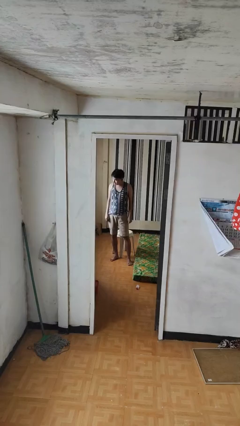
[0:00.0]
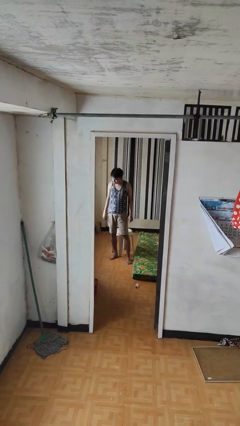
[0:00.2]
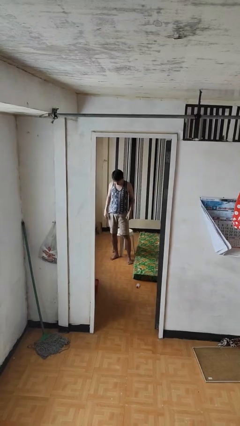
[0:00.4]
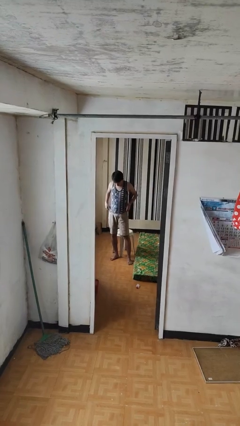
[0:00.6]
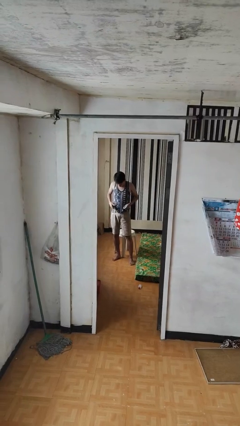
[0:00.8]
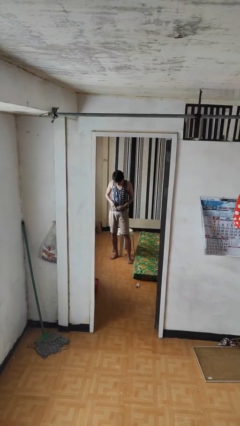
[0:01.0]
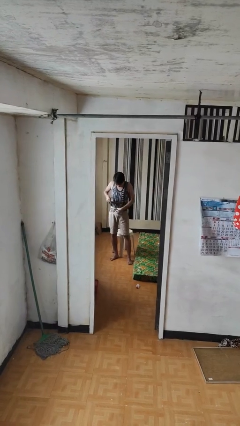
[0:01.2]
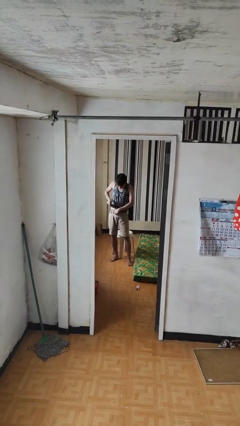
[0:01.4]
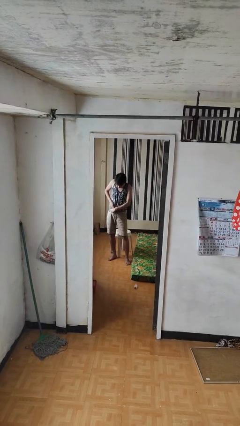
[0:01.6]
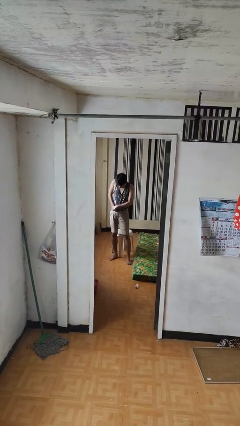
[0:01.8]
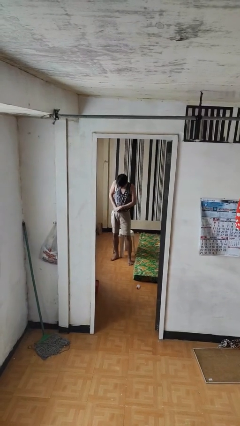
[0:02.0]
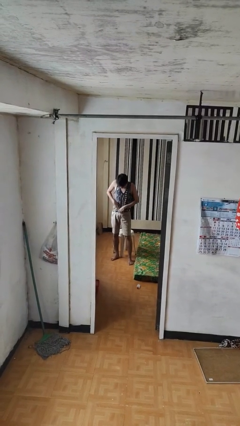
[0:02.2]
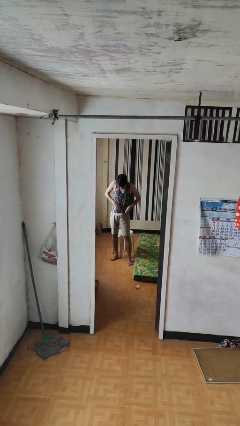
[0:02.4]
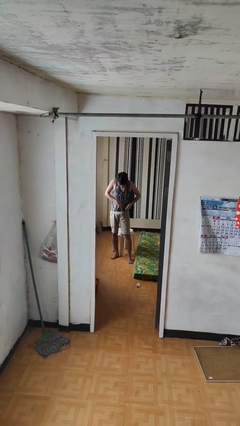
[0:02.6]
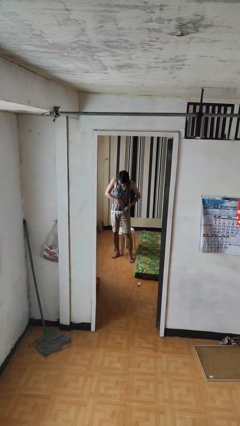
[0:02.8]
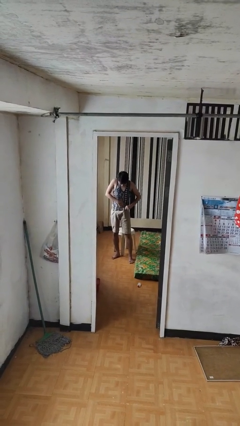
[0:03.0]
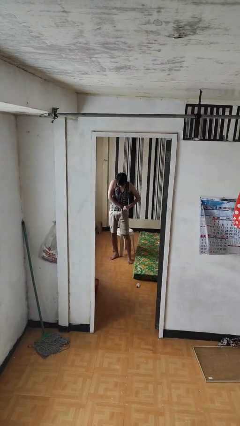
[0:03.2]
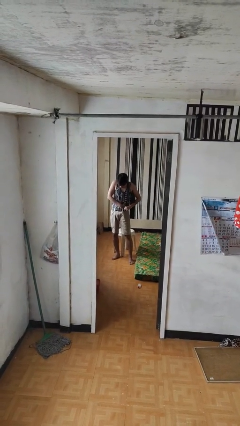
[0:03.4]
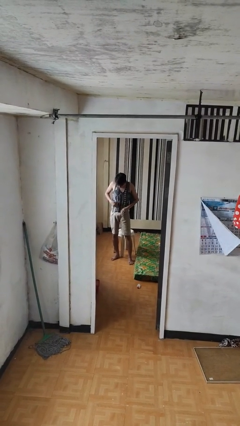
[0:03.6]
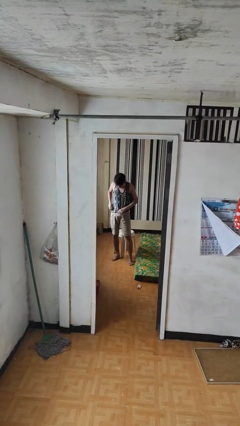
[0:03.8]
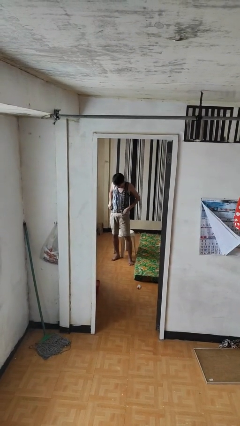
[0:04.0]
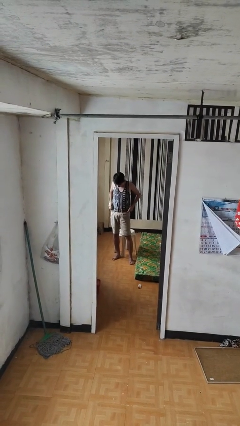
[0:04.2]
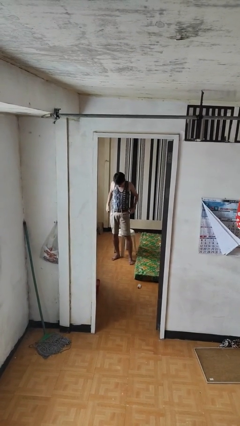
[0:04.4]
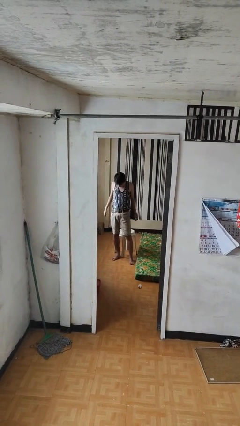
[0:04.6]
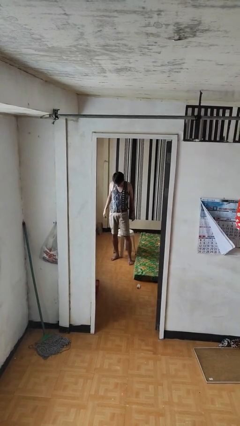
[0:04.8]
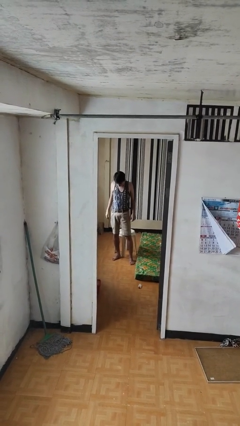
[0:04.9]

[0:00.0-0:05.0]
person tucks in shirt

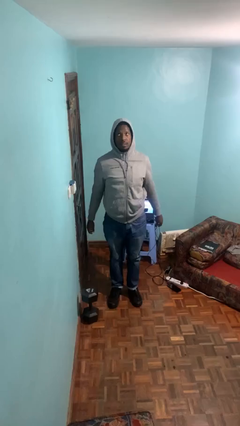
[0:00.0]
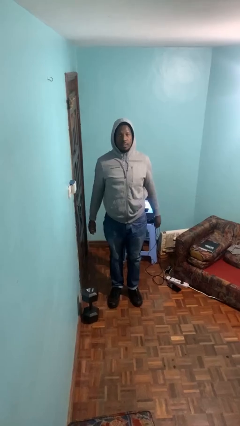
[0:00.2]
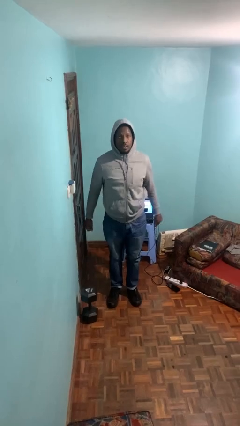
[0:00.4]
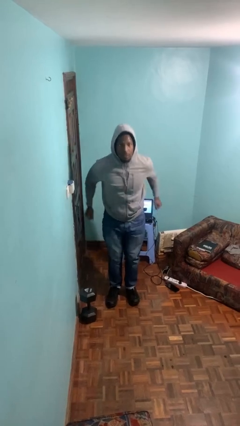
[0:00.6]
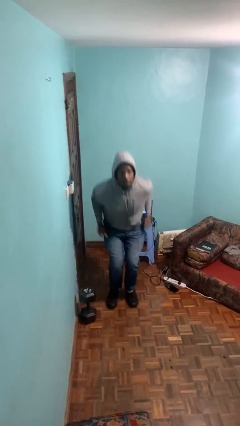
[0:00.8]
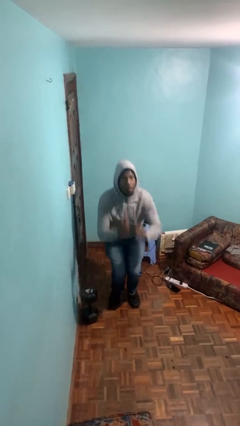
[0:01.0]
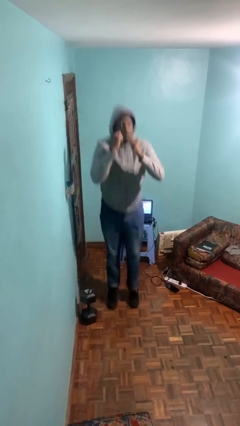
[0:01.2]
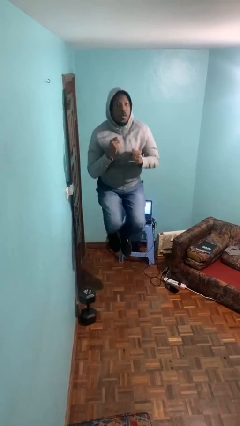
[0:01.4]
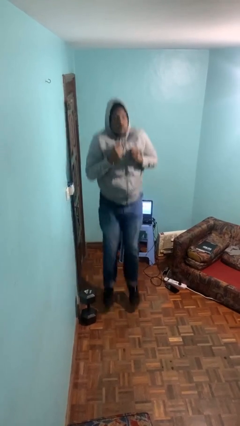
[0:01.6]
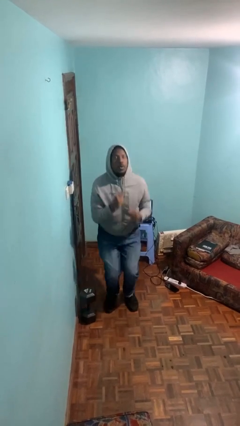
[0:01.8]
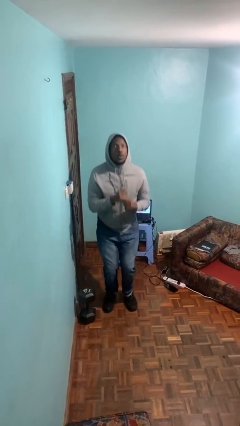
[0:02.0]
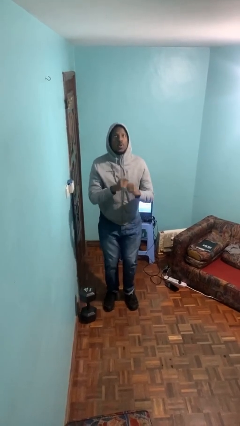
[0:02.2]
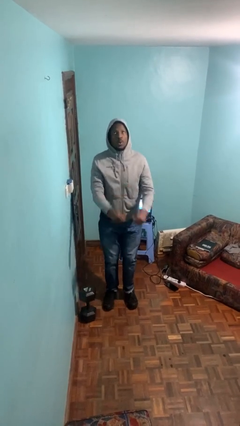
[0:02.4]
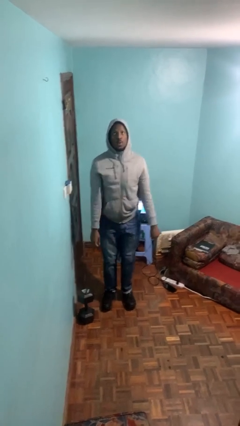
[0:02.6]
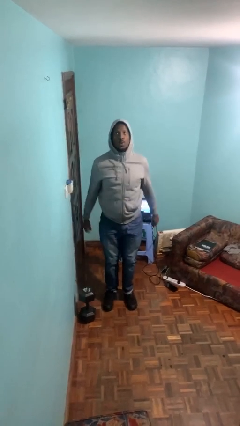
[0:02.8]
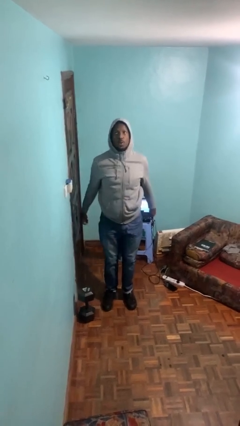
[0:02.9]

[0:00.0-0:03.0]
person jumps

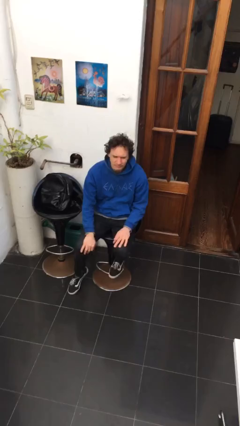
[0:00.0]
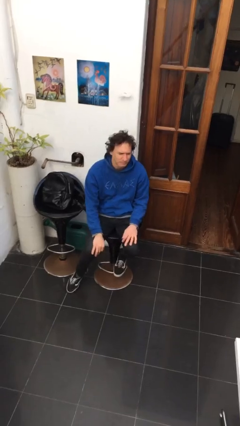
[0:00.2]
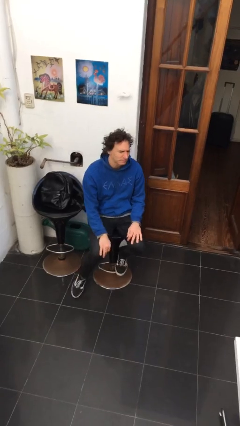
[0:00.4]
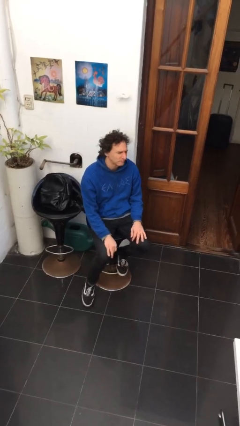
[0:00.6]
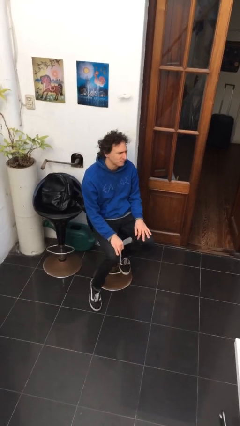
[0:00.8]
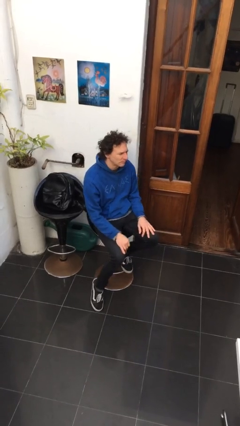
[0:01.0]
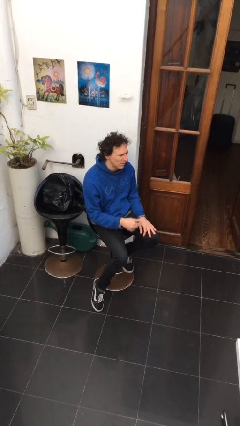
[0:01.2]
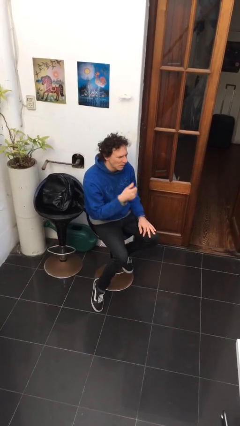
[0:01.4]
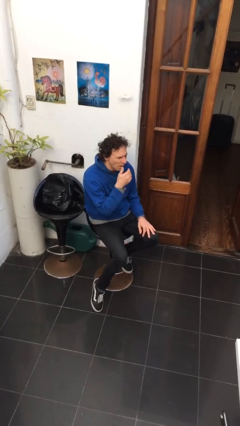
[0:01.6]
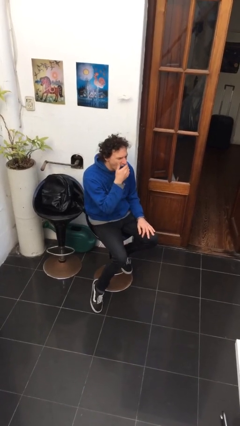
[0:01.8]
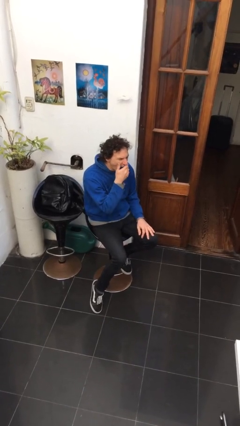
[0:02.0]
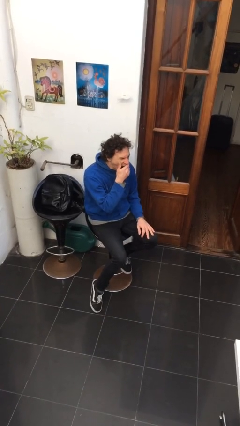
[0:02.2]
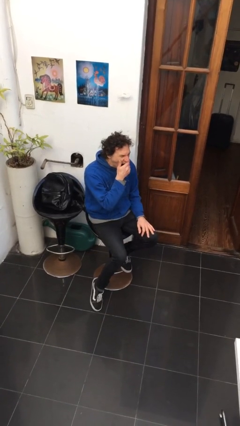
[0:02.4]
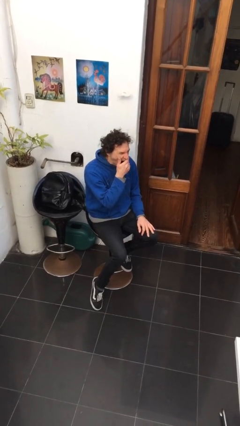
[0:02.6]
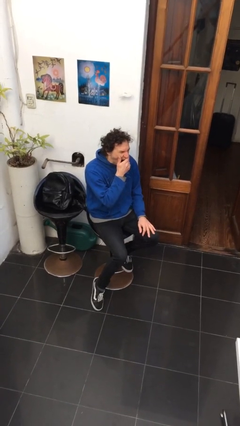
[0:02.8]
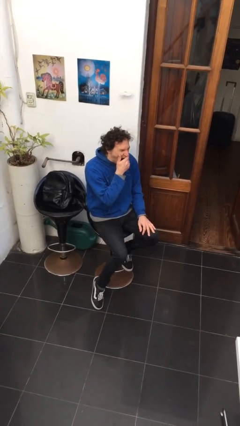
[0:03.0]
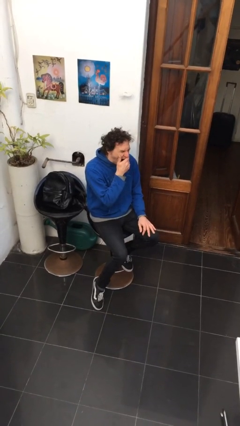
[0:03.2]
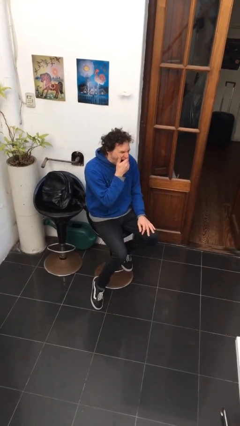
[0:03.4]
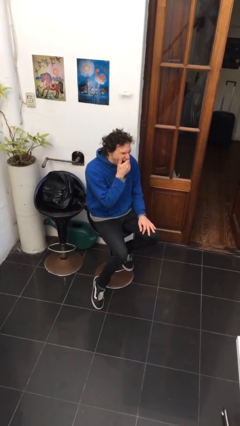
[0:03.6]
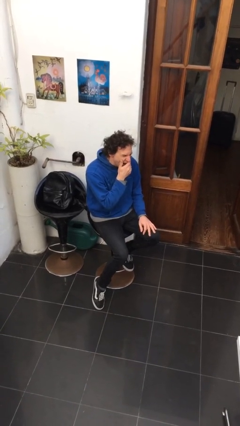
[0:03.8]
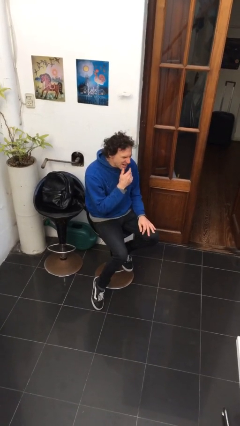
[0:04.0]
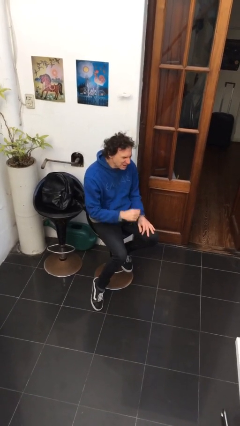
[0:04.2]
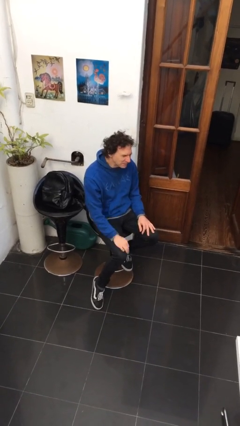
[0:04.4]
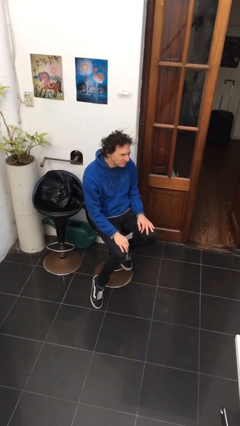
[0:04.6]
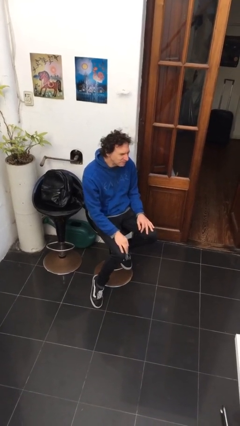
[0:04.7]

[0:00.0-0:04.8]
person yawns

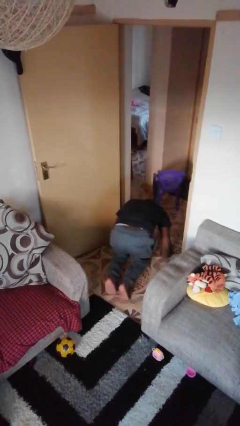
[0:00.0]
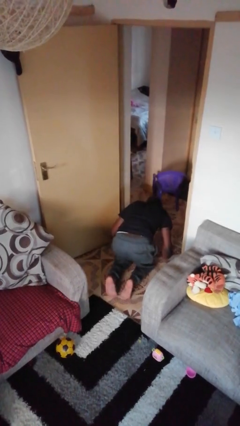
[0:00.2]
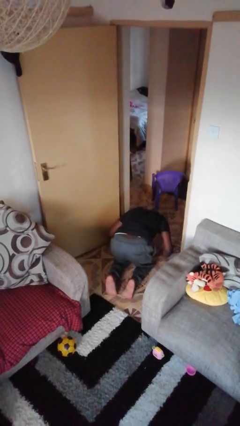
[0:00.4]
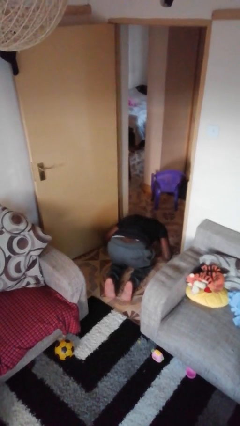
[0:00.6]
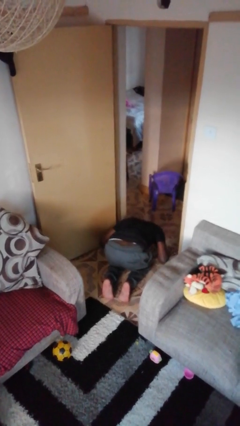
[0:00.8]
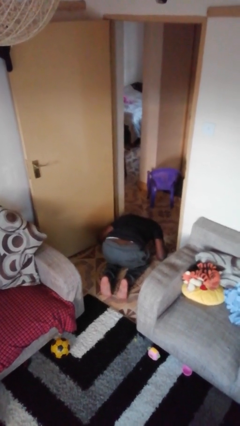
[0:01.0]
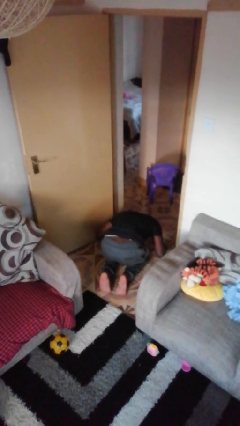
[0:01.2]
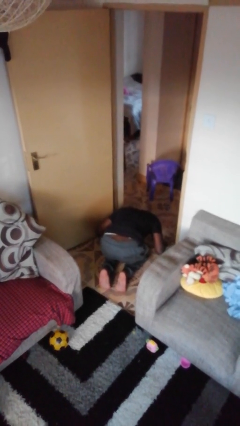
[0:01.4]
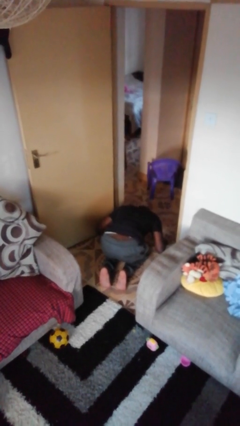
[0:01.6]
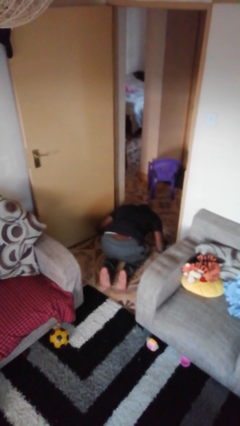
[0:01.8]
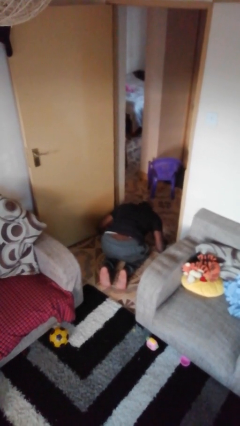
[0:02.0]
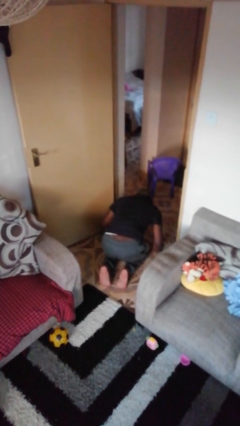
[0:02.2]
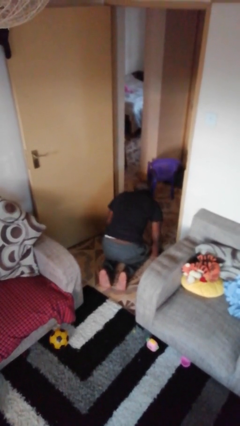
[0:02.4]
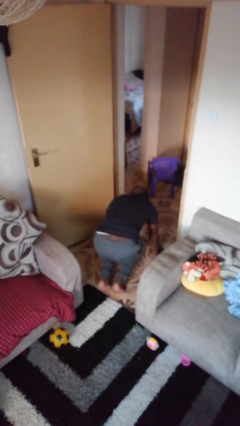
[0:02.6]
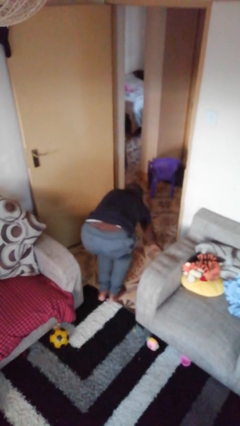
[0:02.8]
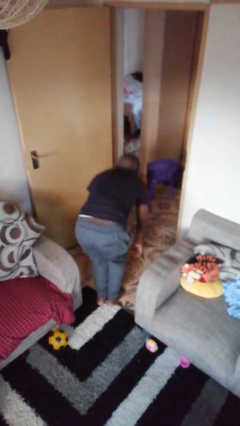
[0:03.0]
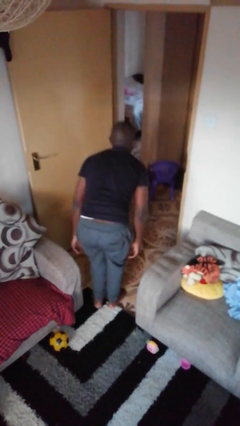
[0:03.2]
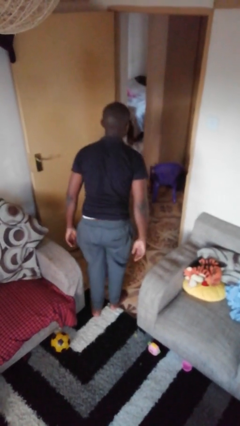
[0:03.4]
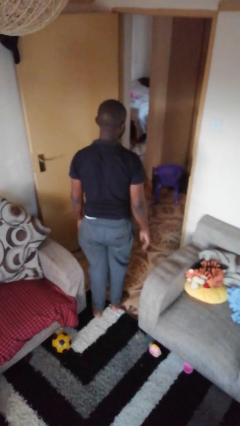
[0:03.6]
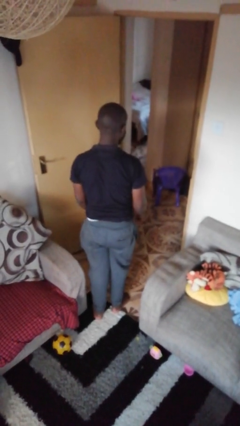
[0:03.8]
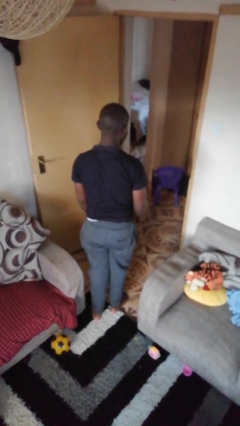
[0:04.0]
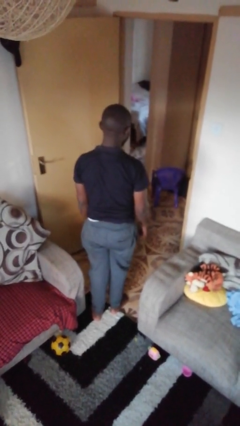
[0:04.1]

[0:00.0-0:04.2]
person lies down on floor

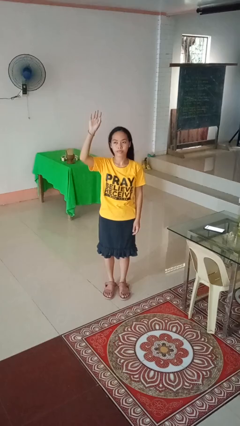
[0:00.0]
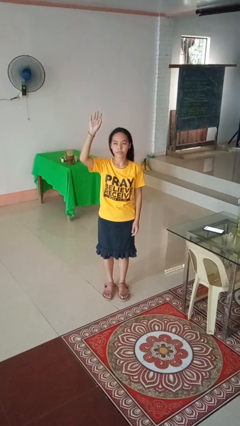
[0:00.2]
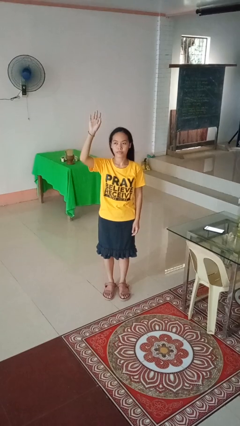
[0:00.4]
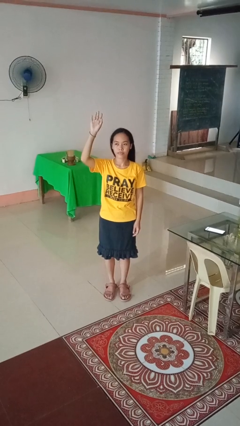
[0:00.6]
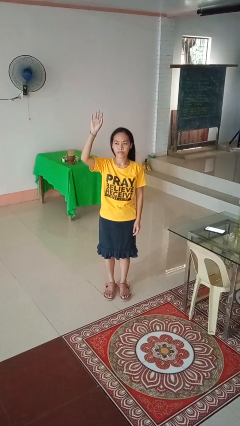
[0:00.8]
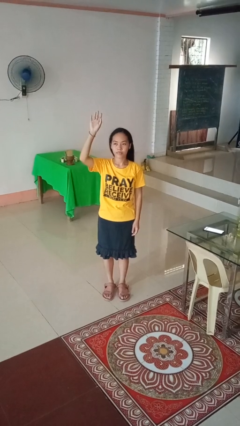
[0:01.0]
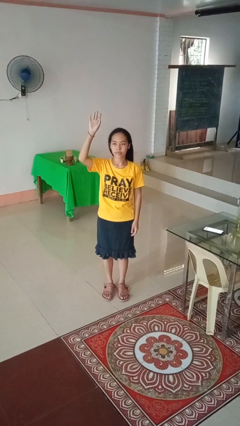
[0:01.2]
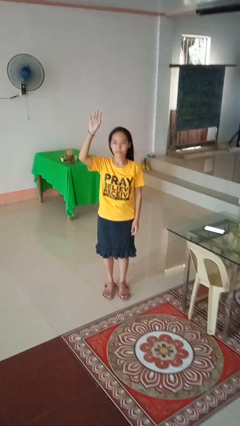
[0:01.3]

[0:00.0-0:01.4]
person gestures raise hand
